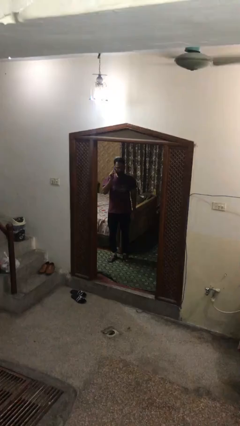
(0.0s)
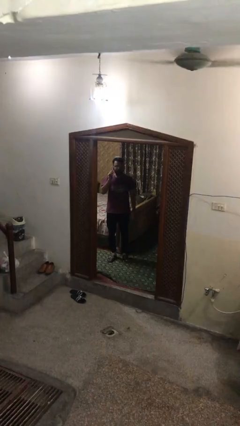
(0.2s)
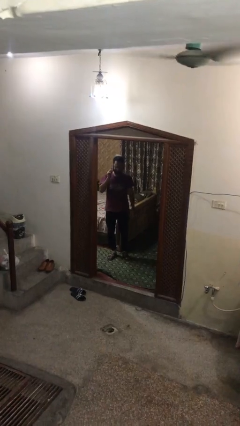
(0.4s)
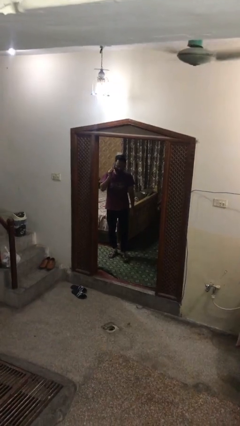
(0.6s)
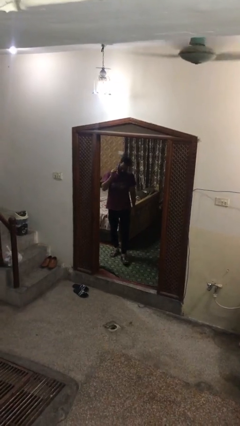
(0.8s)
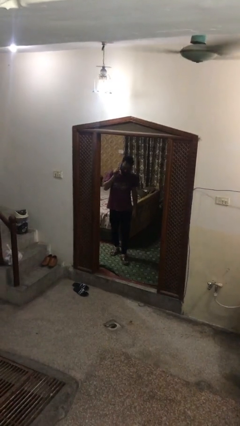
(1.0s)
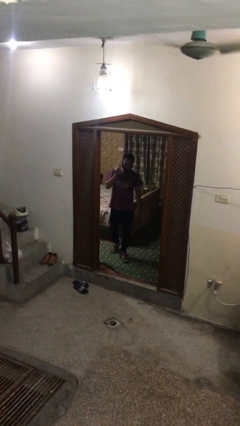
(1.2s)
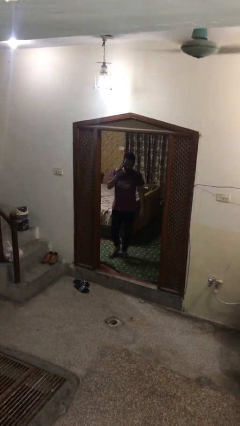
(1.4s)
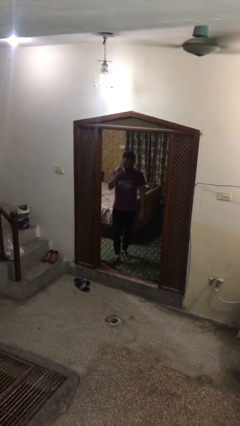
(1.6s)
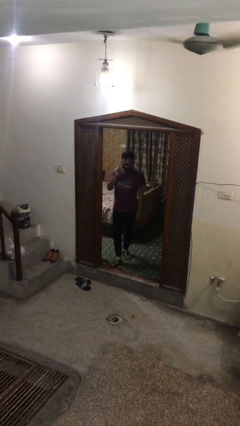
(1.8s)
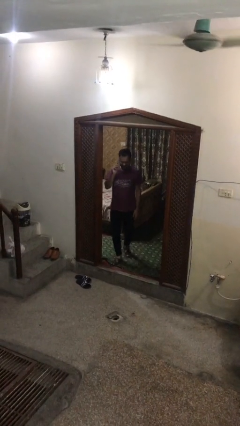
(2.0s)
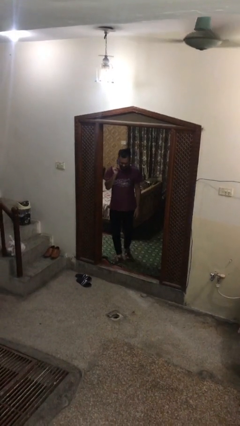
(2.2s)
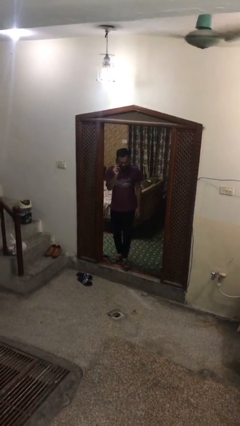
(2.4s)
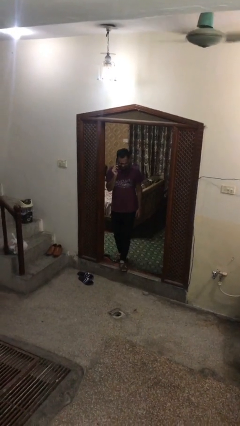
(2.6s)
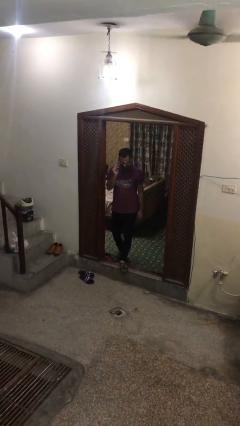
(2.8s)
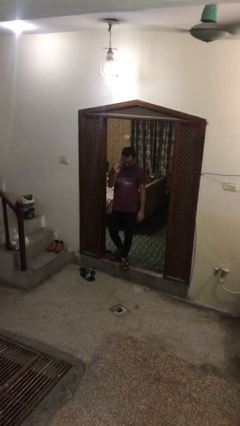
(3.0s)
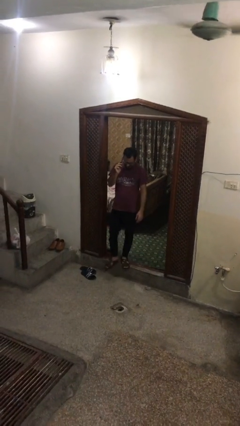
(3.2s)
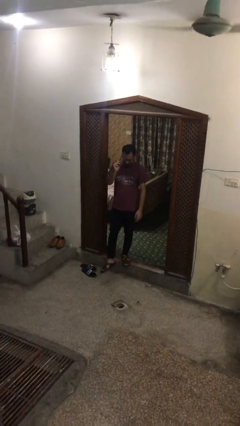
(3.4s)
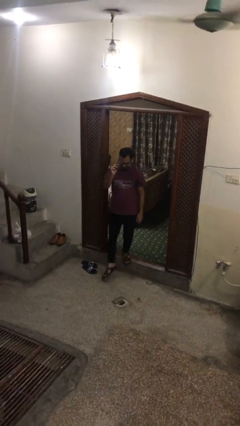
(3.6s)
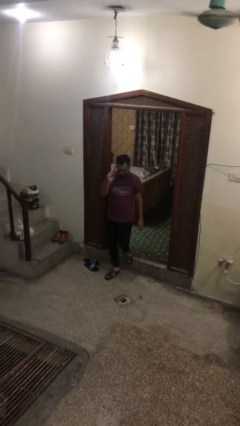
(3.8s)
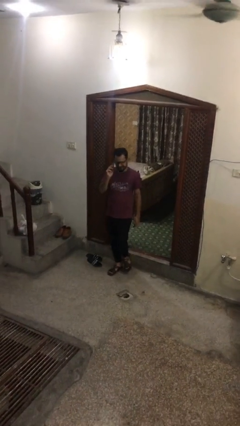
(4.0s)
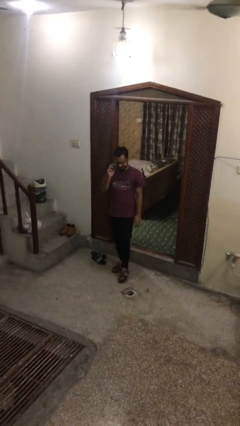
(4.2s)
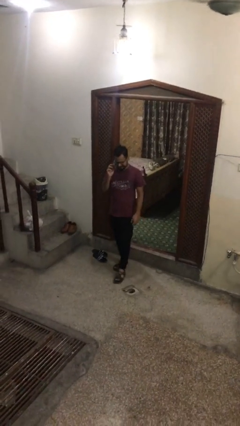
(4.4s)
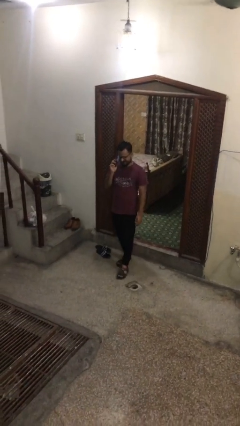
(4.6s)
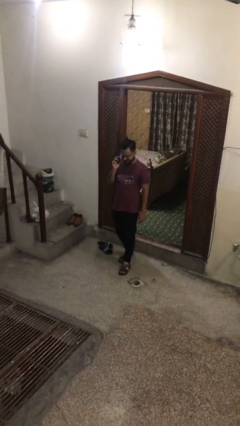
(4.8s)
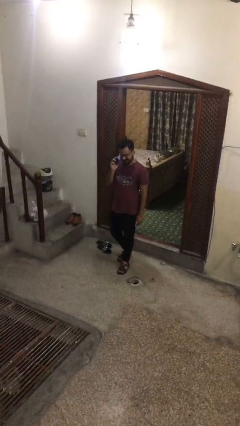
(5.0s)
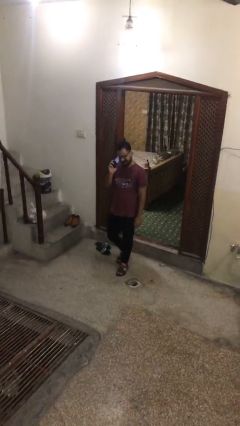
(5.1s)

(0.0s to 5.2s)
person enters scene through structure

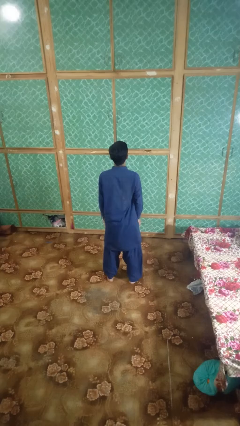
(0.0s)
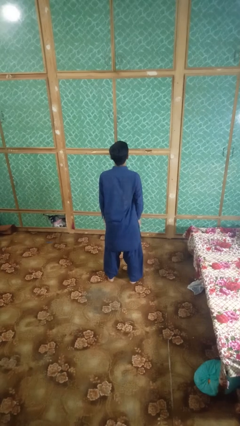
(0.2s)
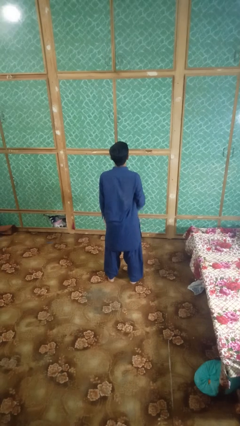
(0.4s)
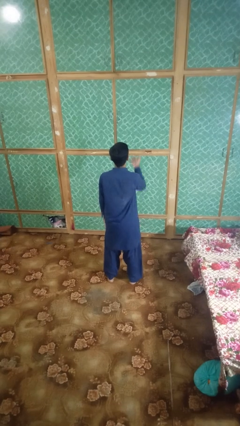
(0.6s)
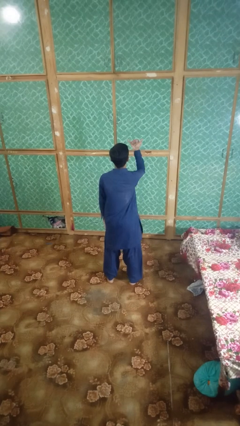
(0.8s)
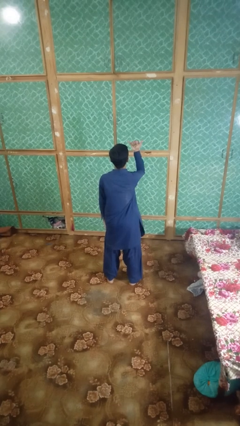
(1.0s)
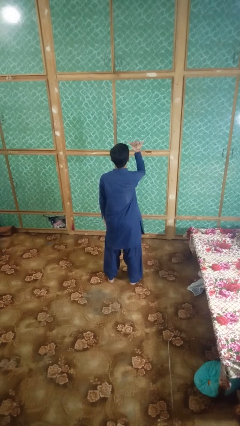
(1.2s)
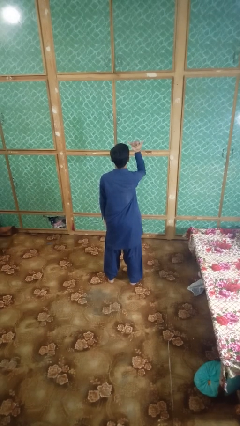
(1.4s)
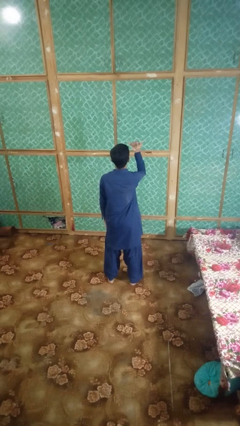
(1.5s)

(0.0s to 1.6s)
person gestures hang loose

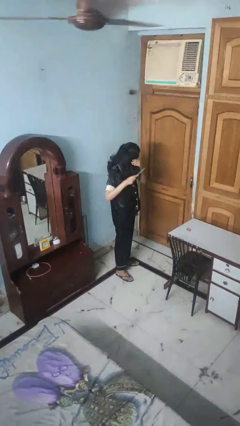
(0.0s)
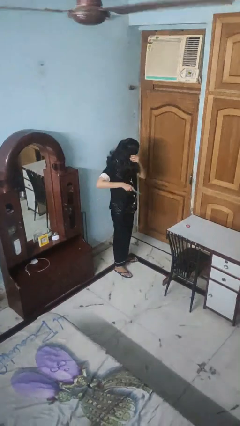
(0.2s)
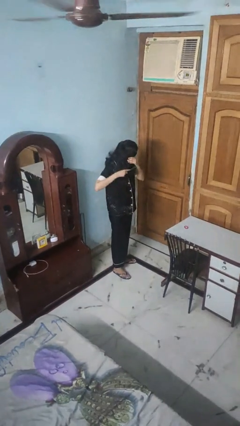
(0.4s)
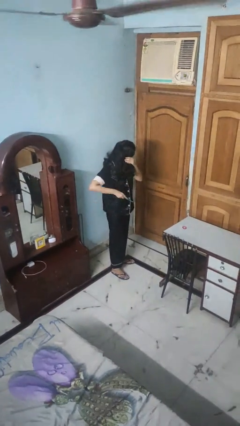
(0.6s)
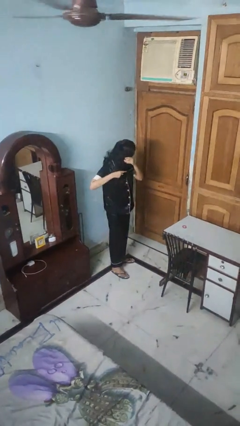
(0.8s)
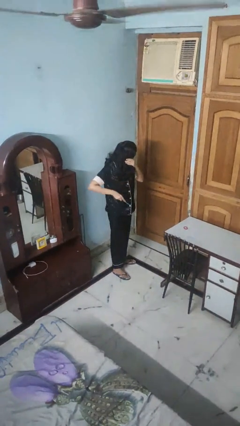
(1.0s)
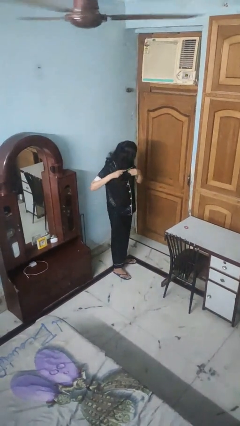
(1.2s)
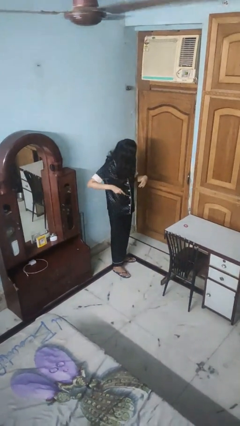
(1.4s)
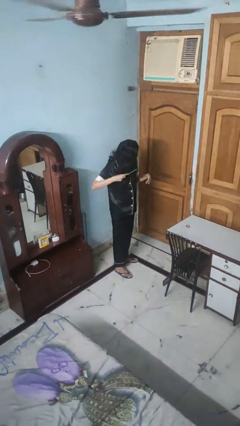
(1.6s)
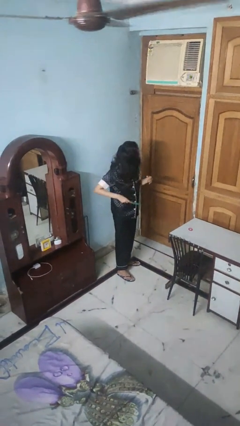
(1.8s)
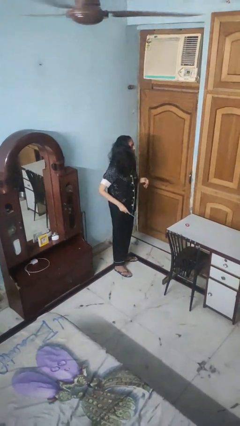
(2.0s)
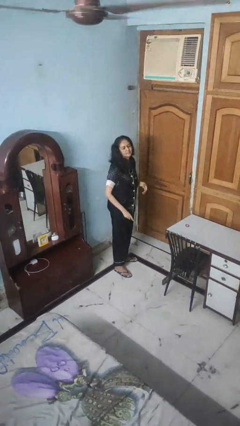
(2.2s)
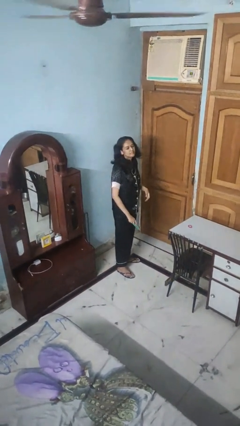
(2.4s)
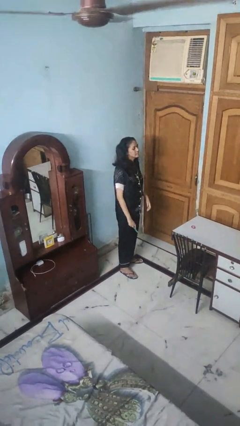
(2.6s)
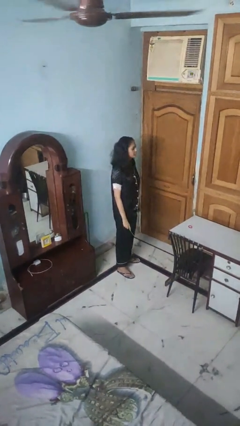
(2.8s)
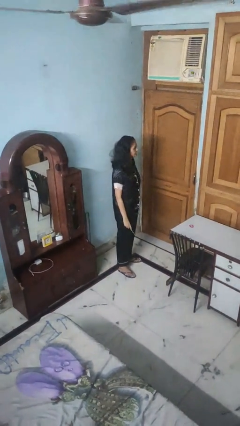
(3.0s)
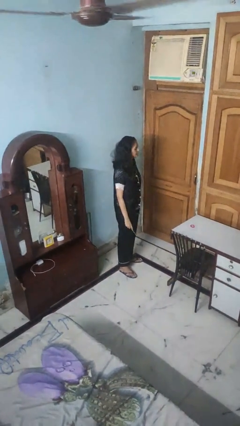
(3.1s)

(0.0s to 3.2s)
person brushes hair

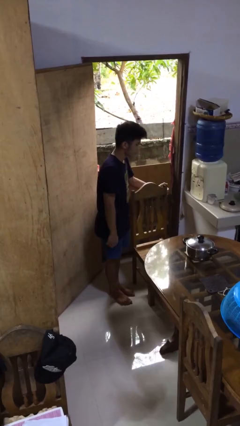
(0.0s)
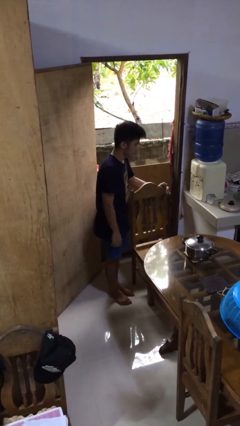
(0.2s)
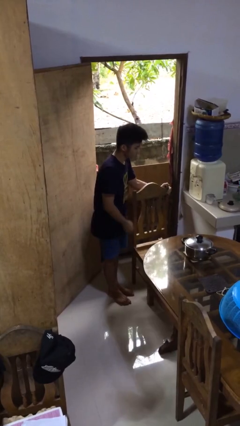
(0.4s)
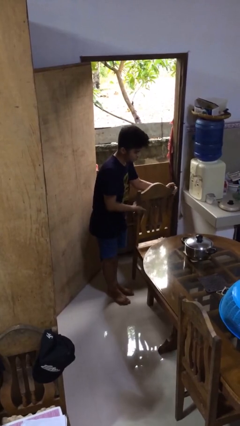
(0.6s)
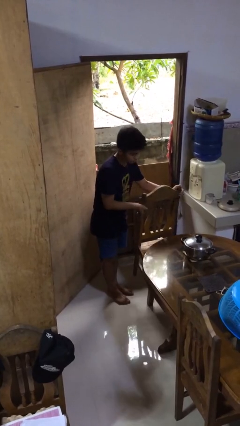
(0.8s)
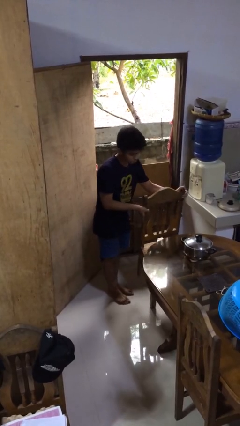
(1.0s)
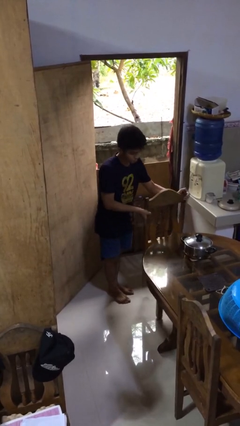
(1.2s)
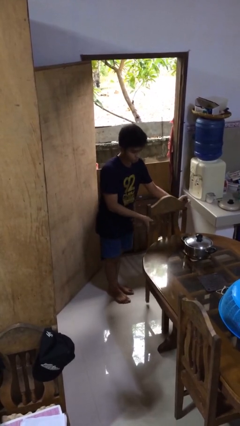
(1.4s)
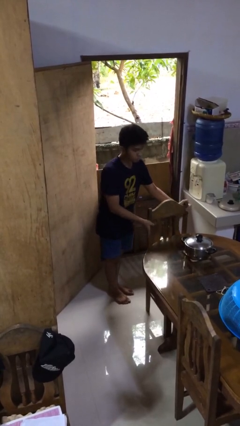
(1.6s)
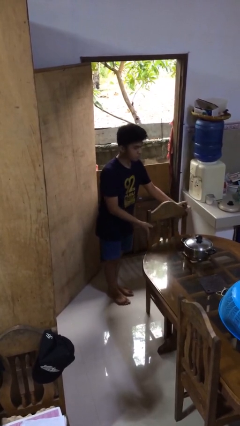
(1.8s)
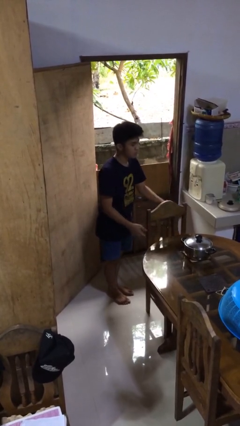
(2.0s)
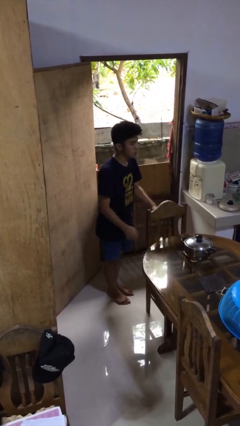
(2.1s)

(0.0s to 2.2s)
person pushes in chair

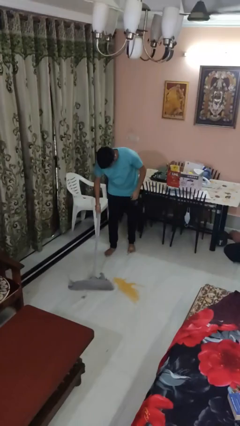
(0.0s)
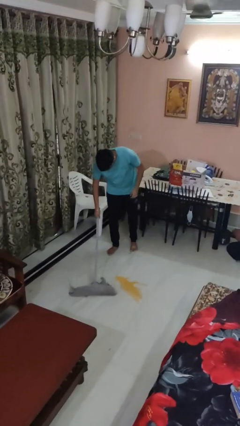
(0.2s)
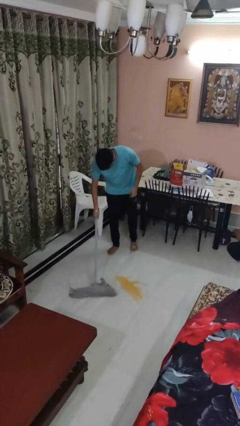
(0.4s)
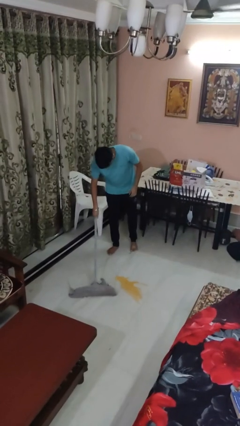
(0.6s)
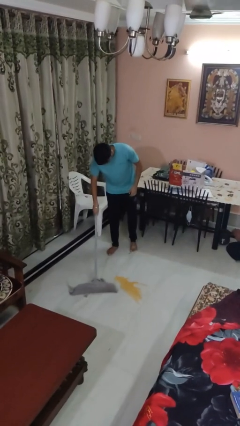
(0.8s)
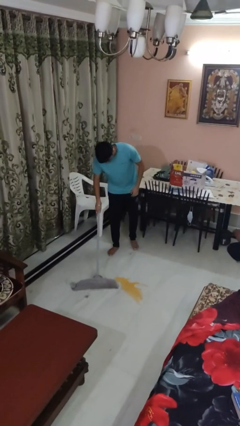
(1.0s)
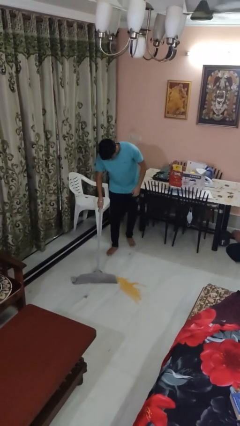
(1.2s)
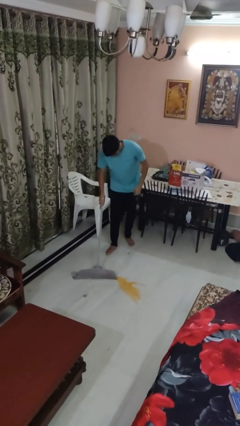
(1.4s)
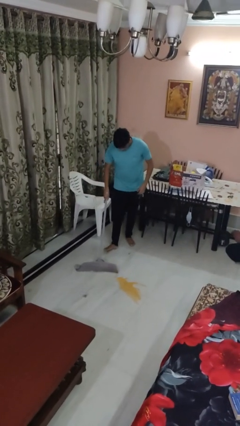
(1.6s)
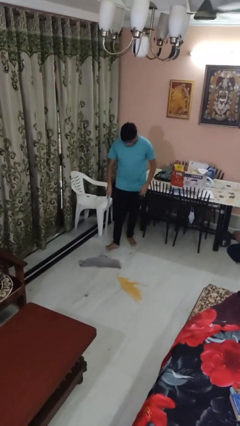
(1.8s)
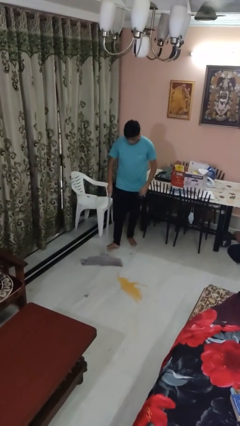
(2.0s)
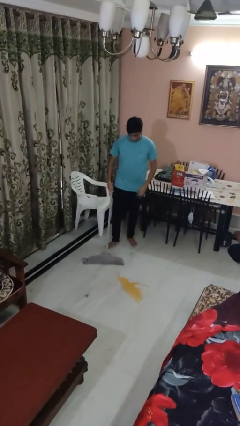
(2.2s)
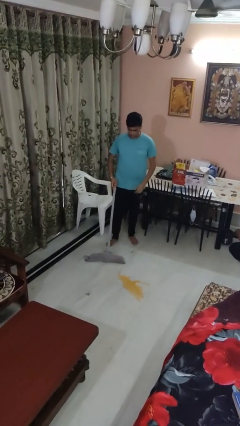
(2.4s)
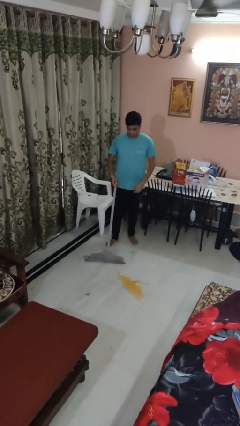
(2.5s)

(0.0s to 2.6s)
person mops

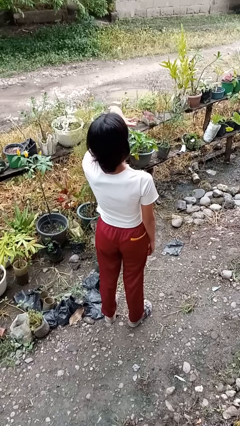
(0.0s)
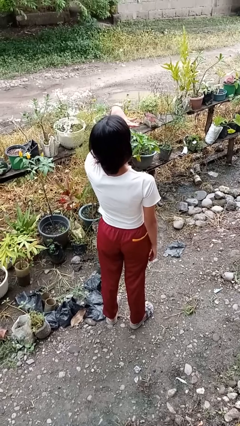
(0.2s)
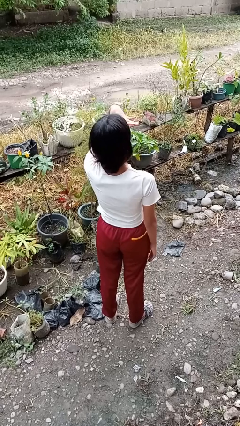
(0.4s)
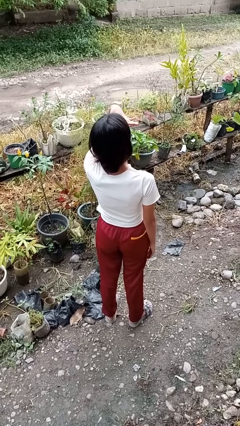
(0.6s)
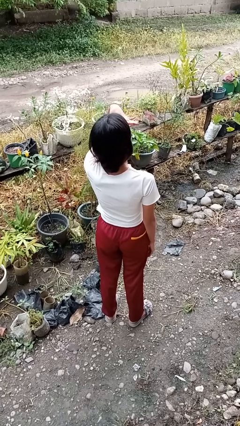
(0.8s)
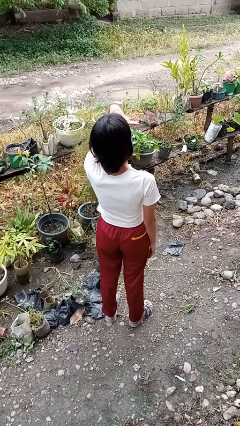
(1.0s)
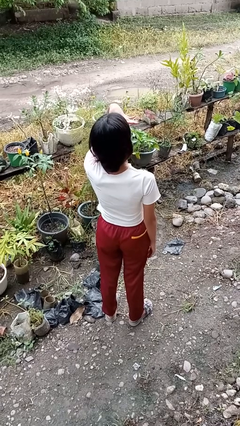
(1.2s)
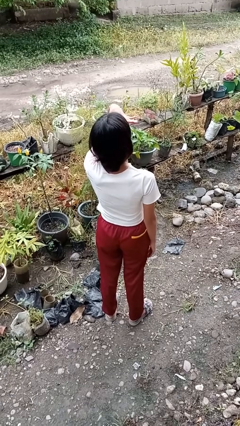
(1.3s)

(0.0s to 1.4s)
person shades eyes

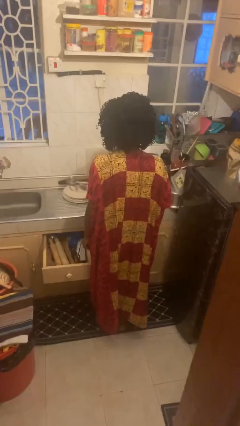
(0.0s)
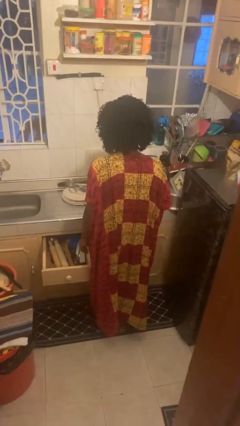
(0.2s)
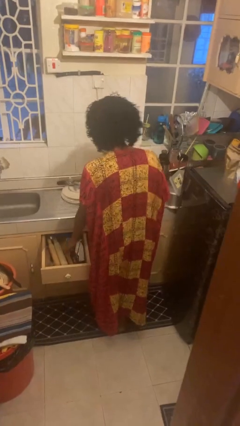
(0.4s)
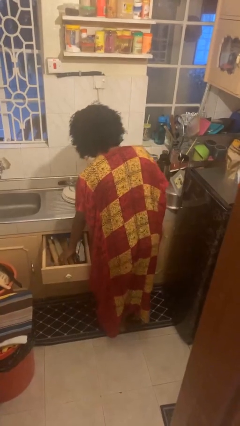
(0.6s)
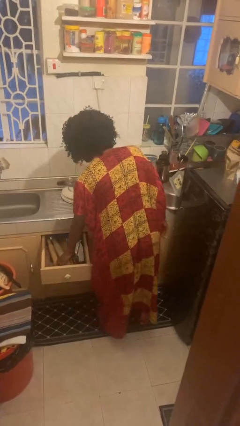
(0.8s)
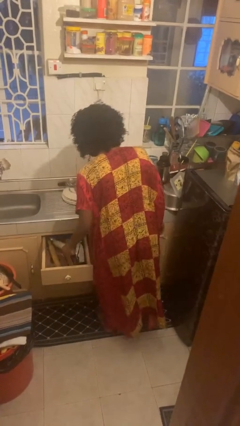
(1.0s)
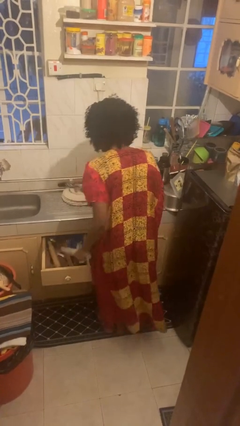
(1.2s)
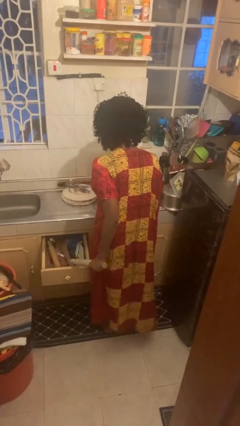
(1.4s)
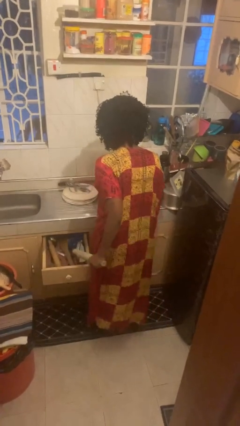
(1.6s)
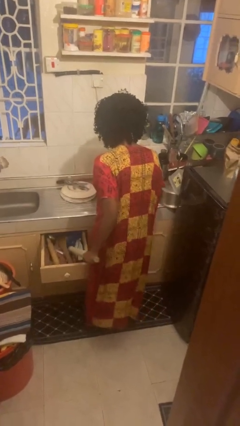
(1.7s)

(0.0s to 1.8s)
person takes object from kitchen drawer
